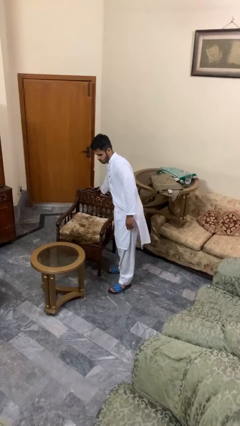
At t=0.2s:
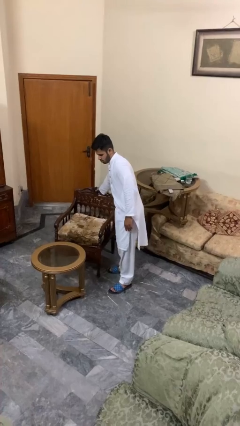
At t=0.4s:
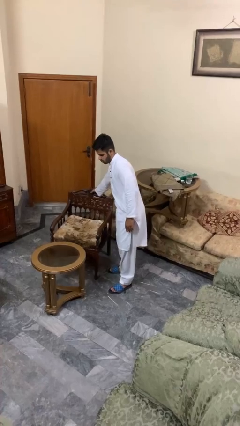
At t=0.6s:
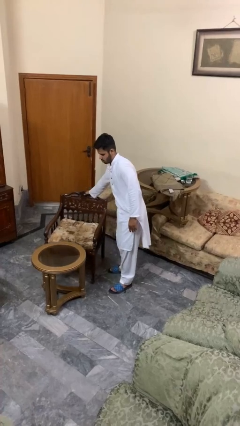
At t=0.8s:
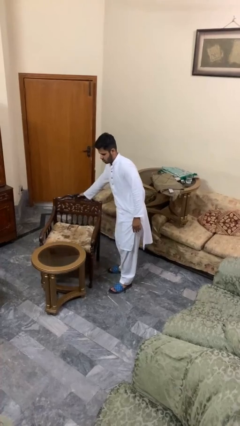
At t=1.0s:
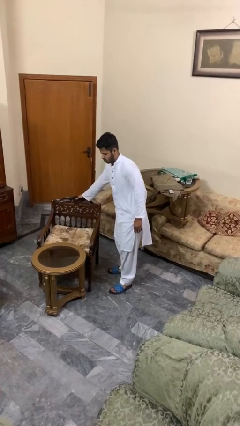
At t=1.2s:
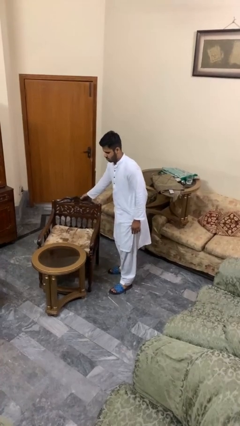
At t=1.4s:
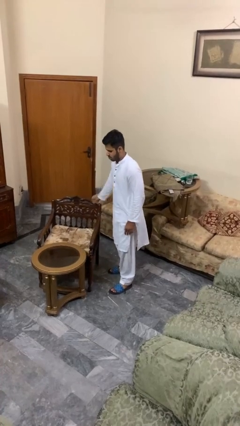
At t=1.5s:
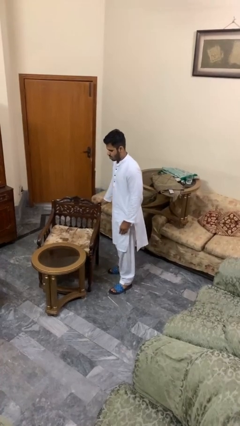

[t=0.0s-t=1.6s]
person pushes in chair

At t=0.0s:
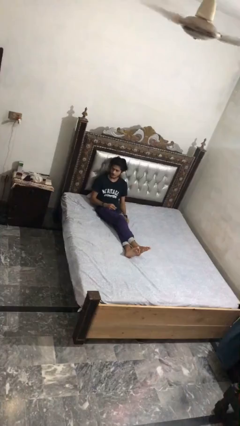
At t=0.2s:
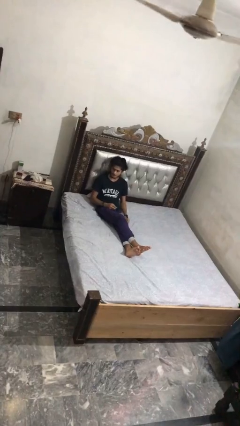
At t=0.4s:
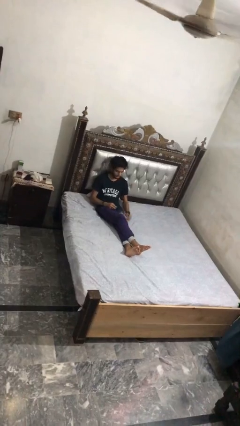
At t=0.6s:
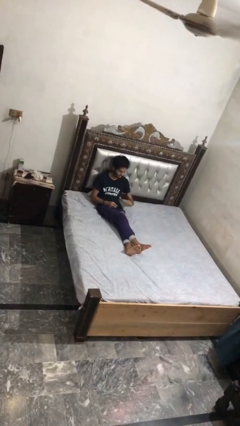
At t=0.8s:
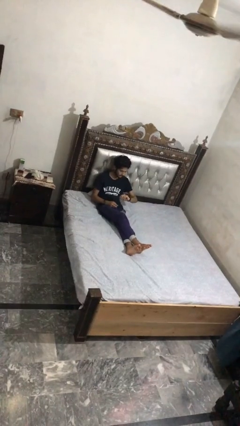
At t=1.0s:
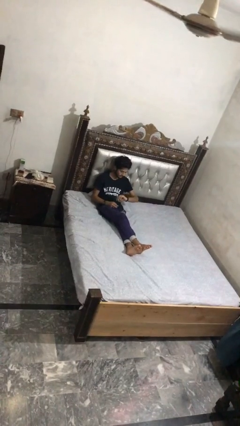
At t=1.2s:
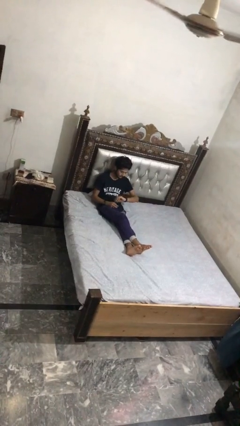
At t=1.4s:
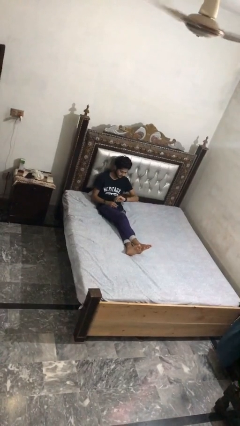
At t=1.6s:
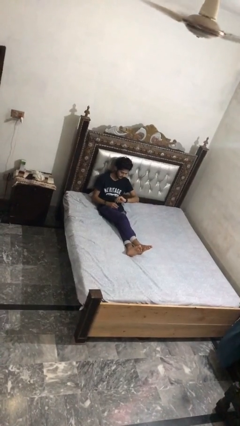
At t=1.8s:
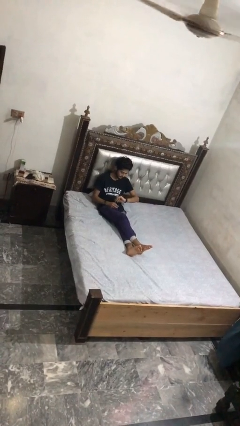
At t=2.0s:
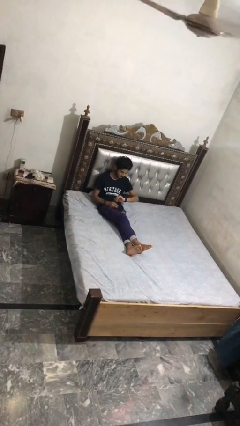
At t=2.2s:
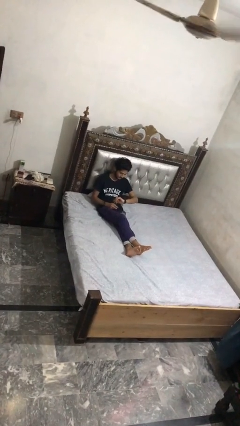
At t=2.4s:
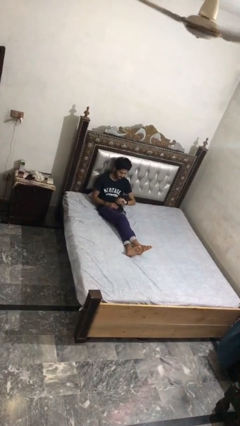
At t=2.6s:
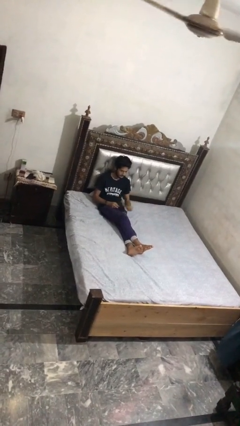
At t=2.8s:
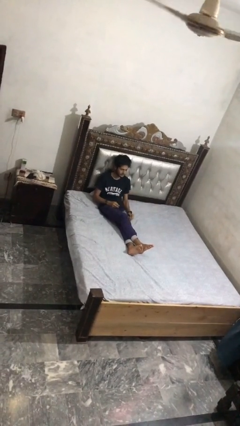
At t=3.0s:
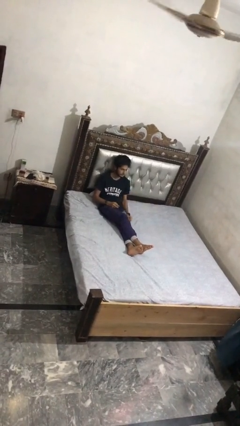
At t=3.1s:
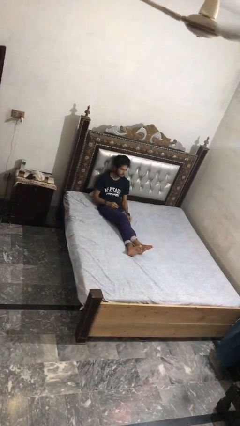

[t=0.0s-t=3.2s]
person looks at wristwatch

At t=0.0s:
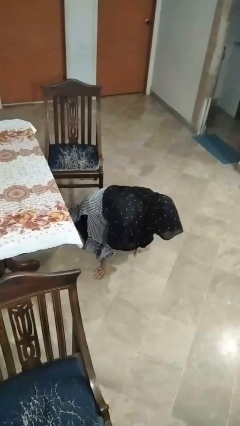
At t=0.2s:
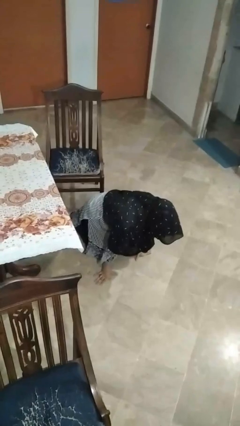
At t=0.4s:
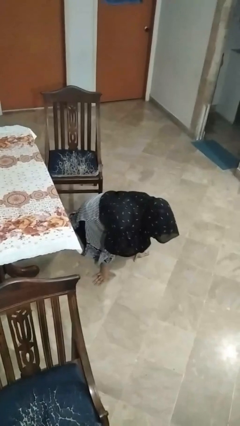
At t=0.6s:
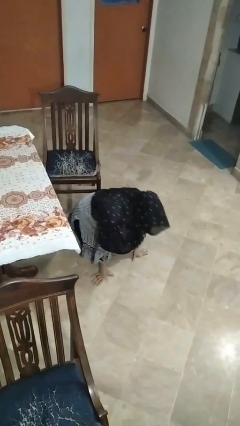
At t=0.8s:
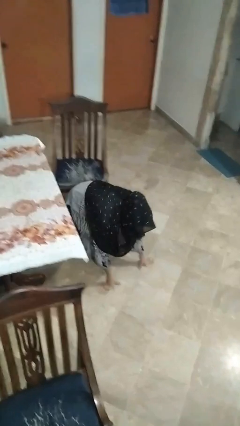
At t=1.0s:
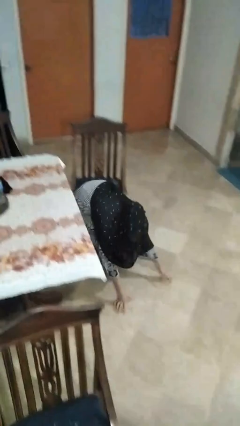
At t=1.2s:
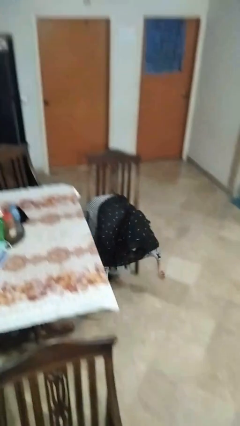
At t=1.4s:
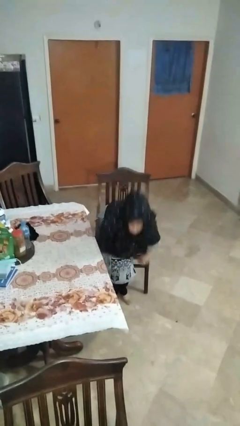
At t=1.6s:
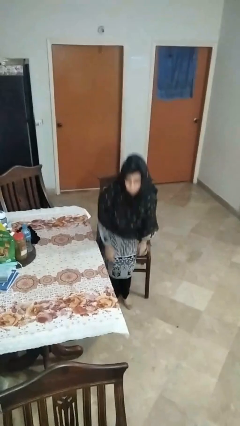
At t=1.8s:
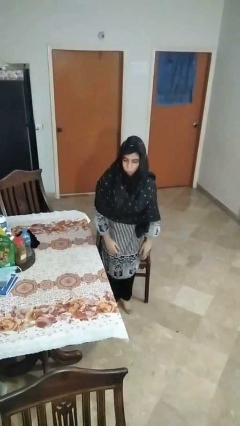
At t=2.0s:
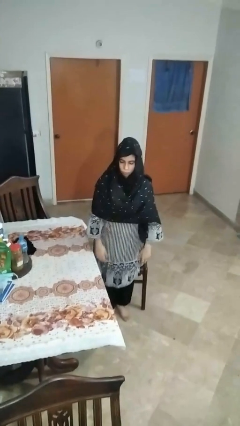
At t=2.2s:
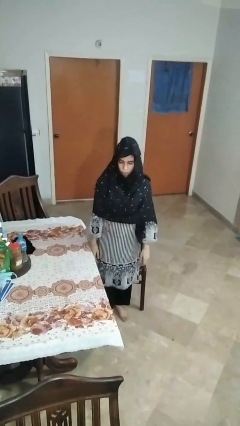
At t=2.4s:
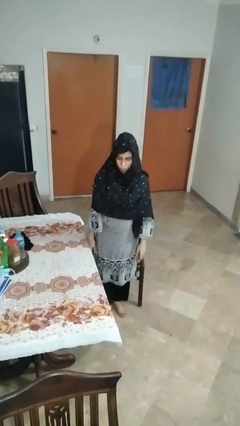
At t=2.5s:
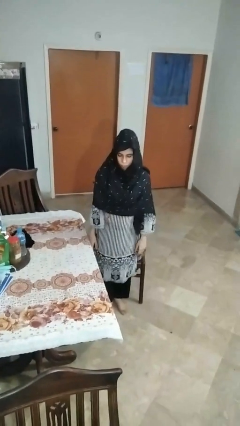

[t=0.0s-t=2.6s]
person stands up from floor

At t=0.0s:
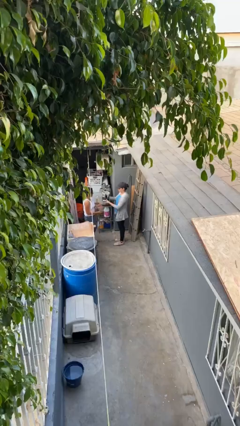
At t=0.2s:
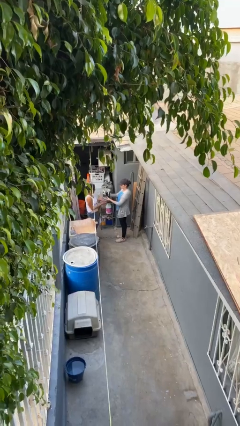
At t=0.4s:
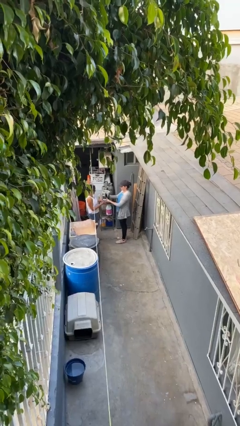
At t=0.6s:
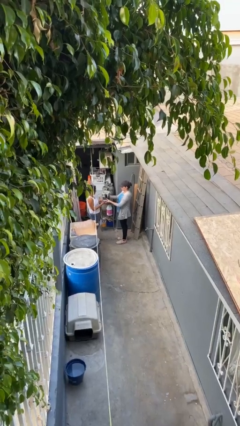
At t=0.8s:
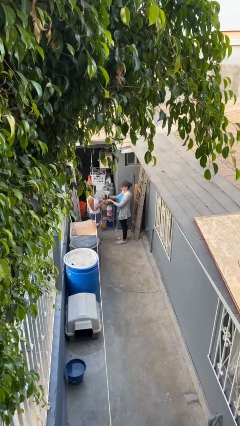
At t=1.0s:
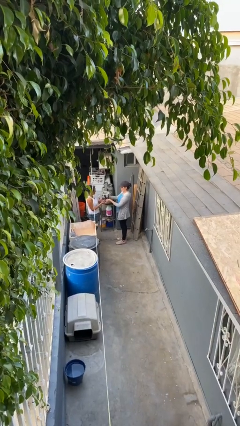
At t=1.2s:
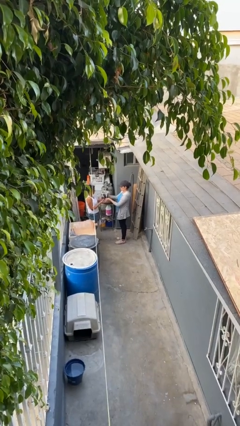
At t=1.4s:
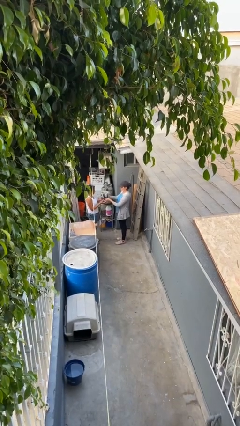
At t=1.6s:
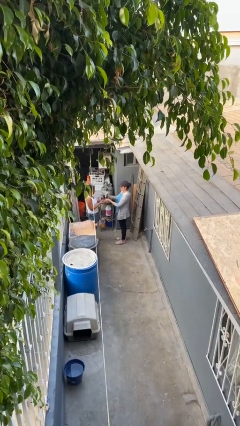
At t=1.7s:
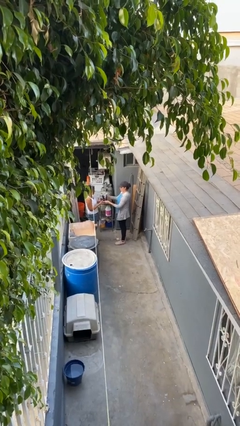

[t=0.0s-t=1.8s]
person transfers object to person

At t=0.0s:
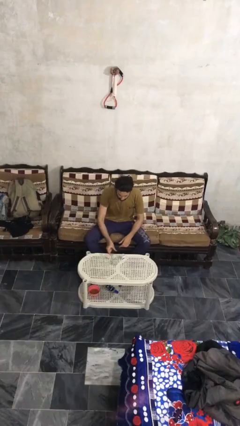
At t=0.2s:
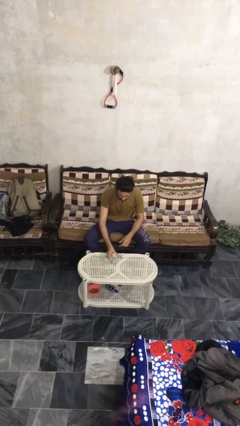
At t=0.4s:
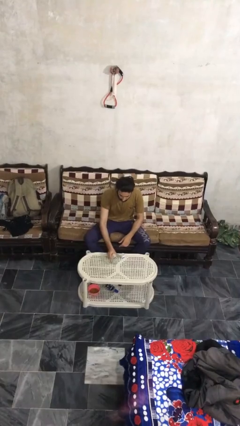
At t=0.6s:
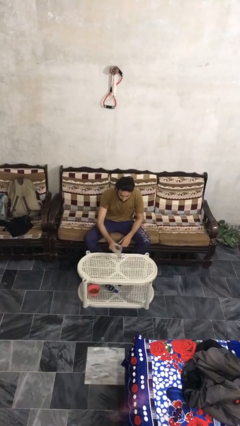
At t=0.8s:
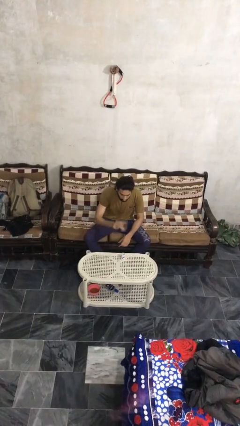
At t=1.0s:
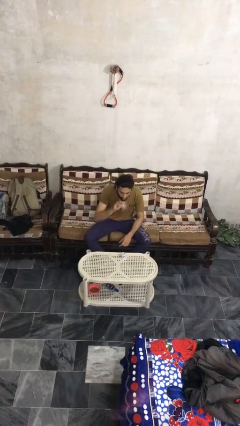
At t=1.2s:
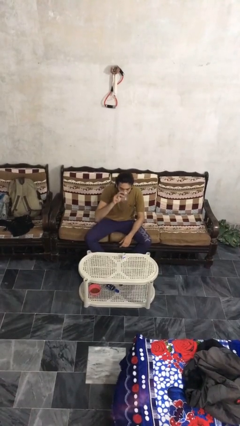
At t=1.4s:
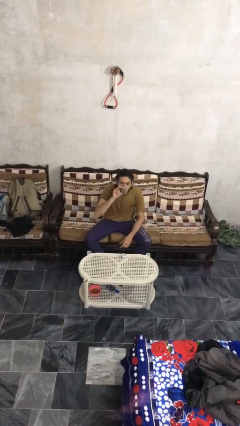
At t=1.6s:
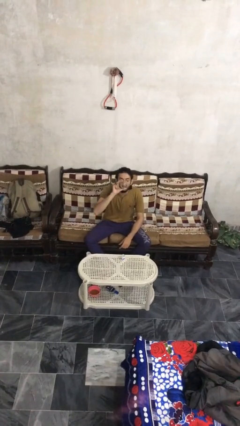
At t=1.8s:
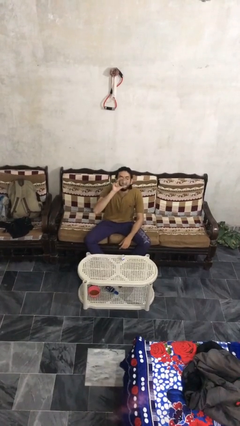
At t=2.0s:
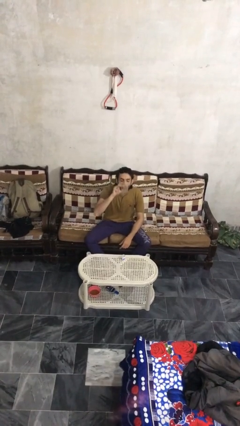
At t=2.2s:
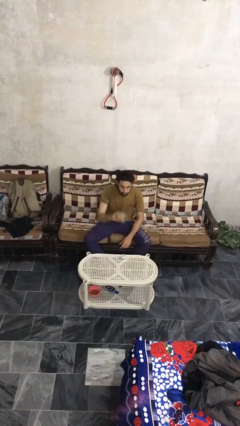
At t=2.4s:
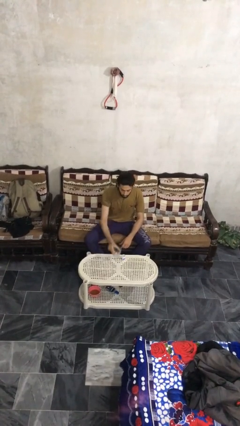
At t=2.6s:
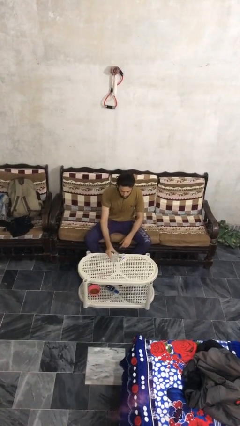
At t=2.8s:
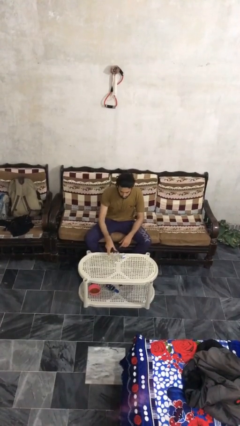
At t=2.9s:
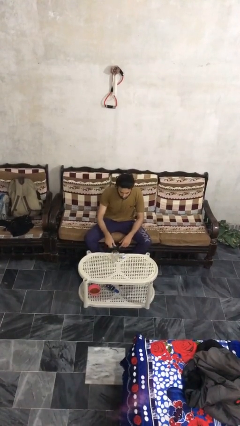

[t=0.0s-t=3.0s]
person drinks from cup

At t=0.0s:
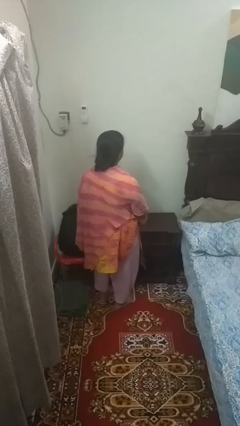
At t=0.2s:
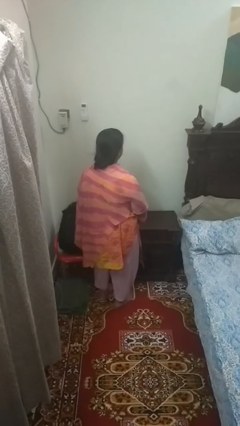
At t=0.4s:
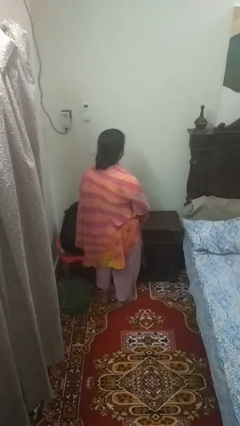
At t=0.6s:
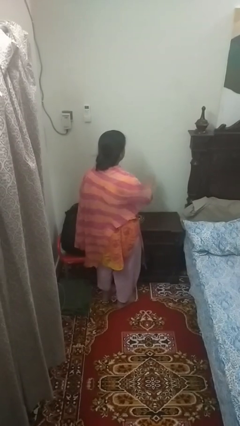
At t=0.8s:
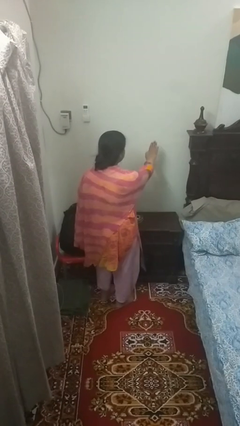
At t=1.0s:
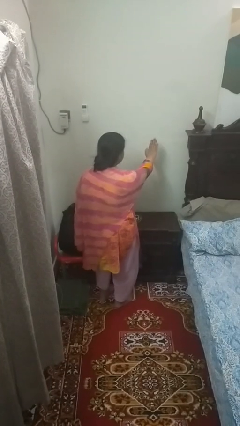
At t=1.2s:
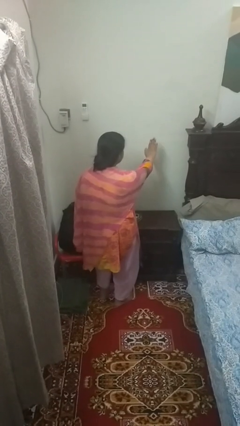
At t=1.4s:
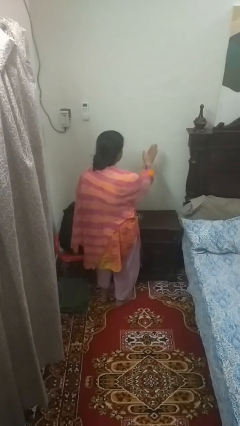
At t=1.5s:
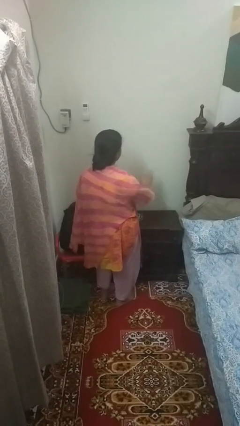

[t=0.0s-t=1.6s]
person gestures stop

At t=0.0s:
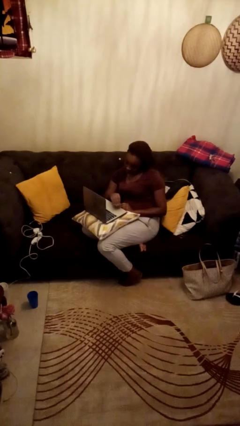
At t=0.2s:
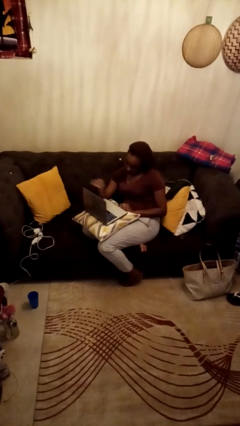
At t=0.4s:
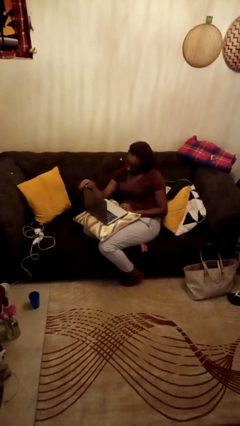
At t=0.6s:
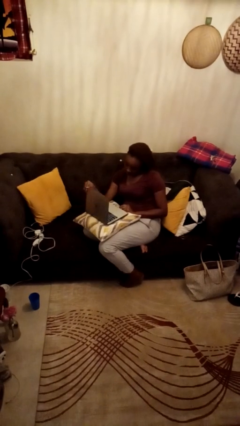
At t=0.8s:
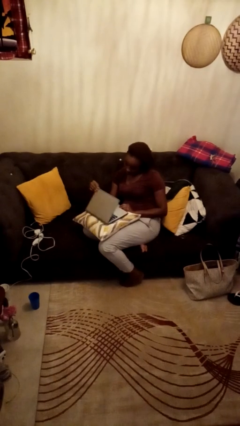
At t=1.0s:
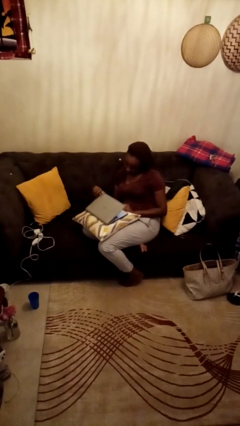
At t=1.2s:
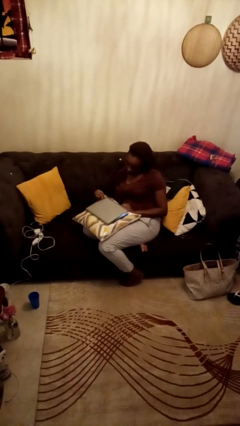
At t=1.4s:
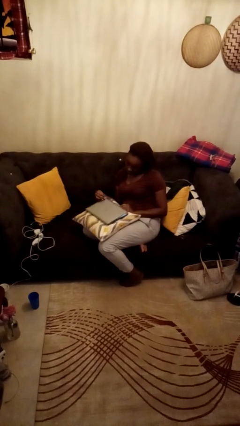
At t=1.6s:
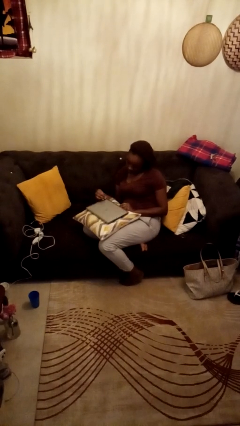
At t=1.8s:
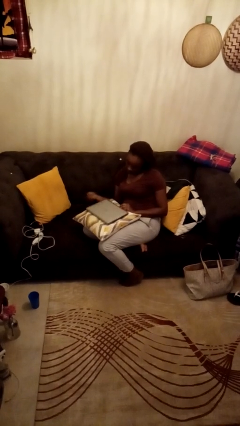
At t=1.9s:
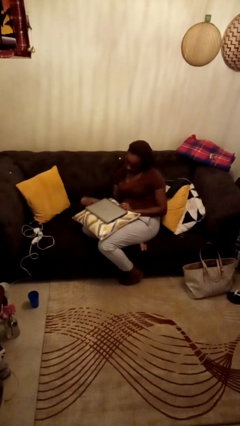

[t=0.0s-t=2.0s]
person closes laptop

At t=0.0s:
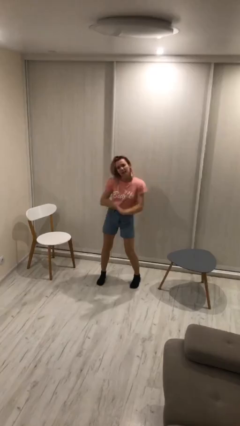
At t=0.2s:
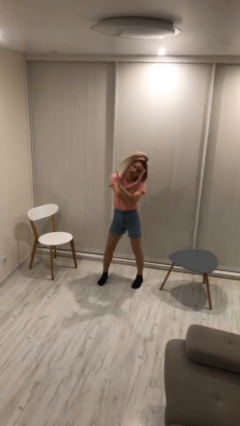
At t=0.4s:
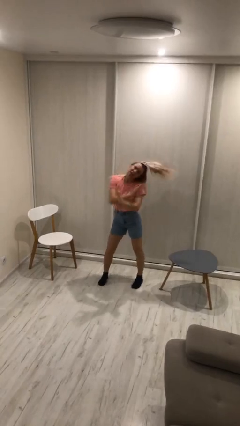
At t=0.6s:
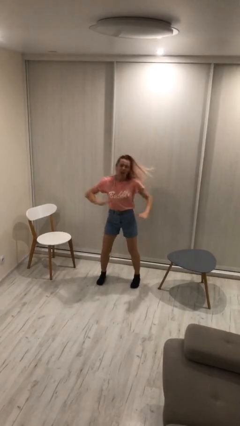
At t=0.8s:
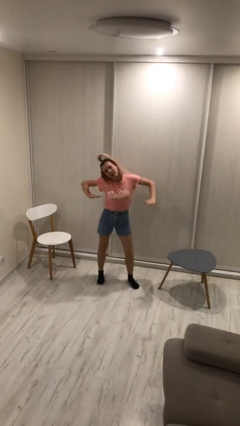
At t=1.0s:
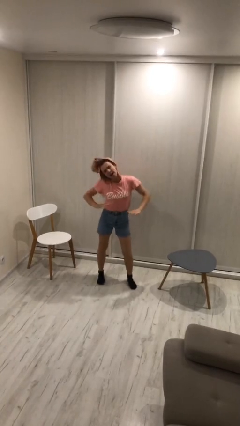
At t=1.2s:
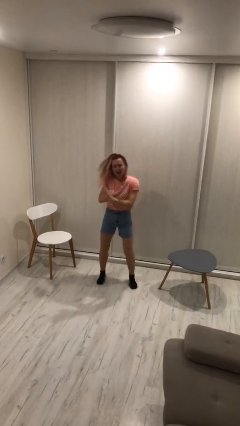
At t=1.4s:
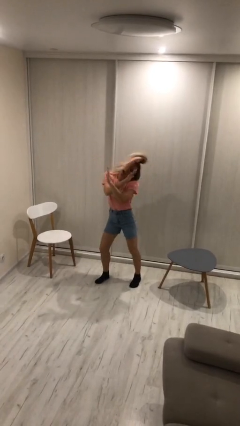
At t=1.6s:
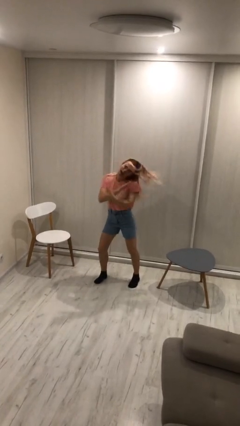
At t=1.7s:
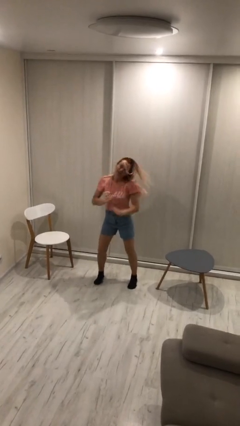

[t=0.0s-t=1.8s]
person dances in place
